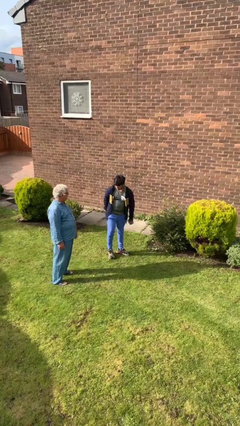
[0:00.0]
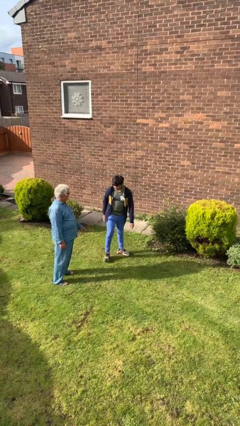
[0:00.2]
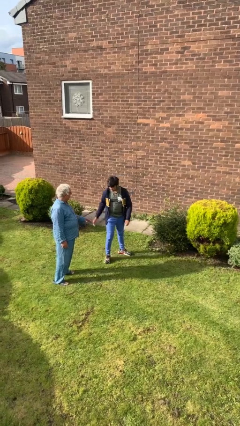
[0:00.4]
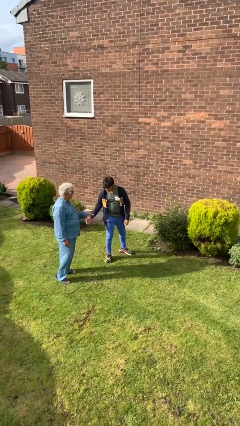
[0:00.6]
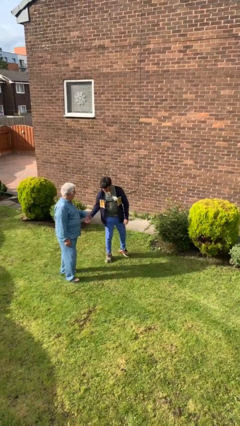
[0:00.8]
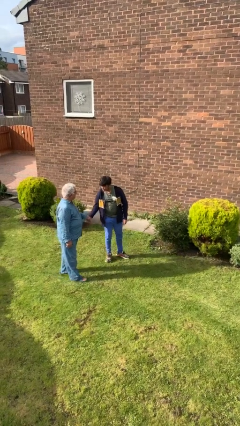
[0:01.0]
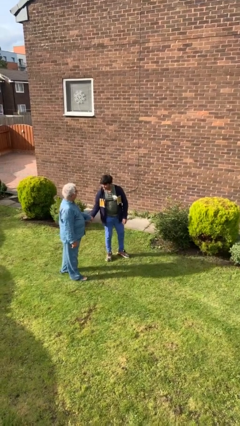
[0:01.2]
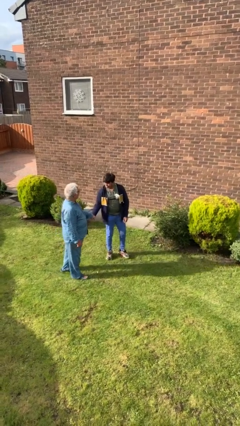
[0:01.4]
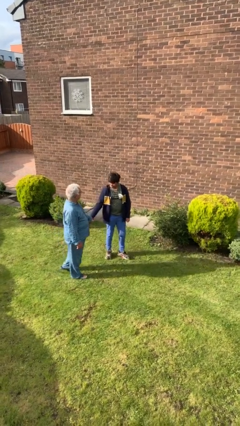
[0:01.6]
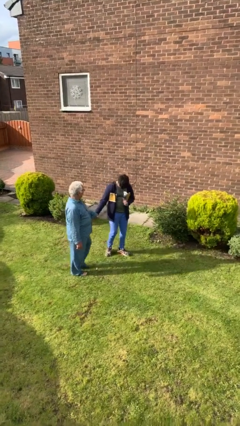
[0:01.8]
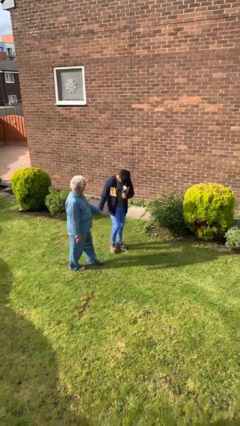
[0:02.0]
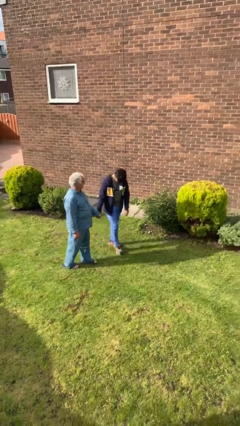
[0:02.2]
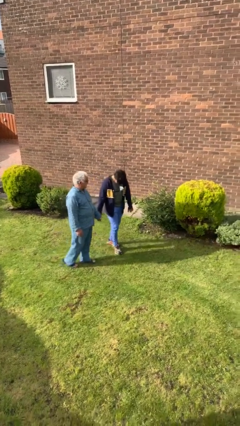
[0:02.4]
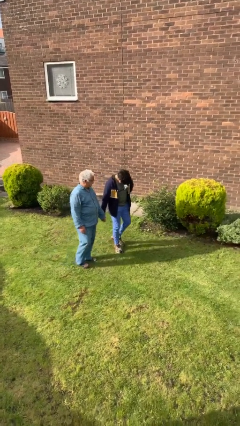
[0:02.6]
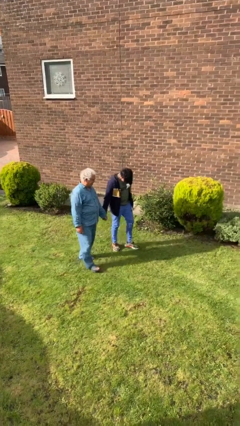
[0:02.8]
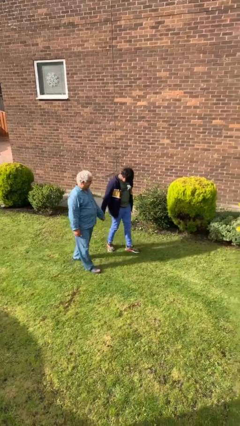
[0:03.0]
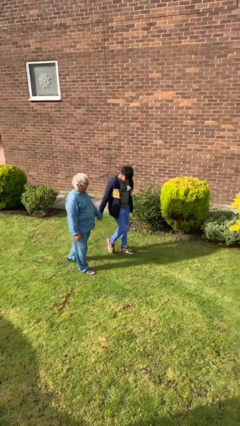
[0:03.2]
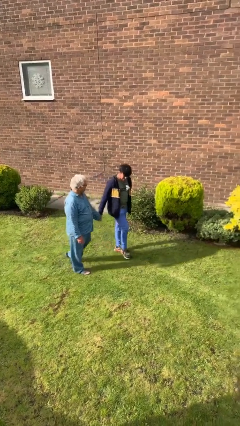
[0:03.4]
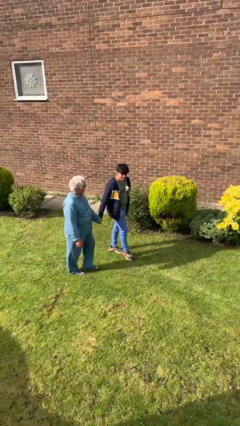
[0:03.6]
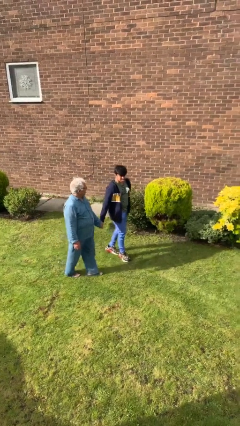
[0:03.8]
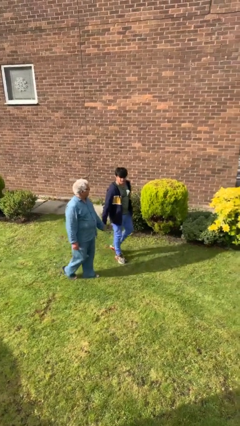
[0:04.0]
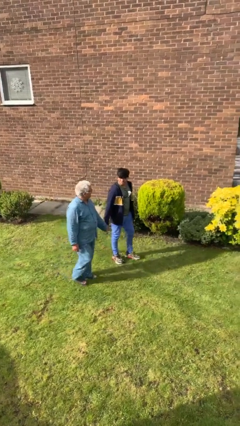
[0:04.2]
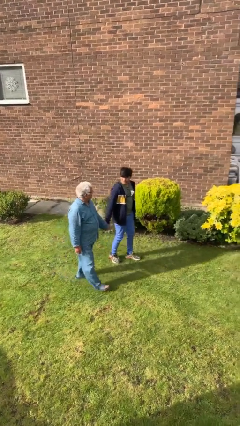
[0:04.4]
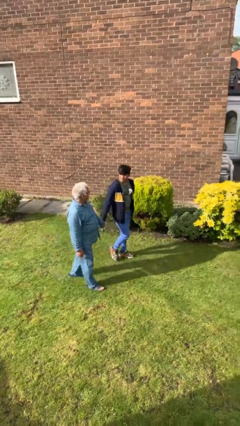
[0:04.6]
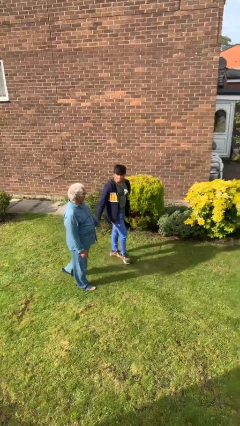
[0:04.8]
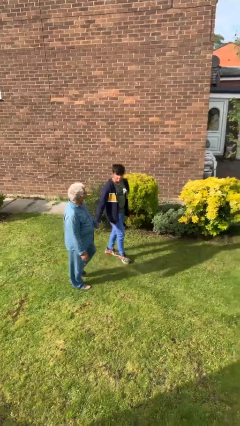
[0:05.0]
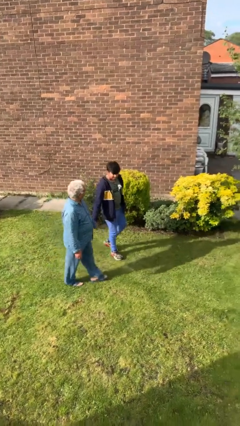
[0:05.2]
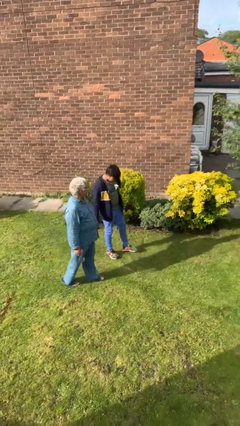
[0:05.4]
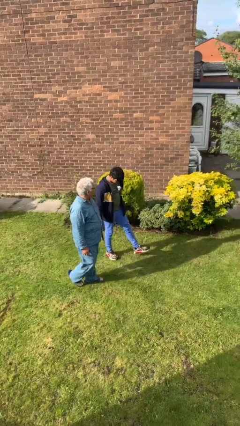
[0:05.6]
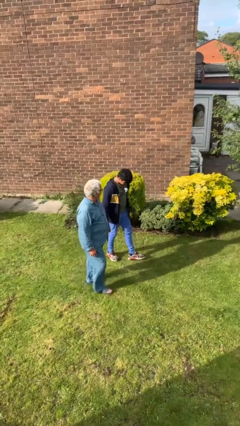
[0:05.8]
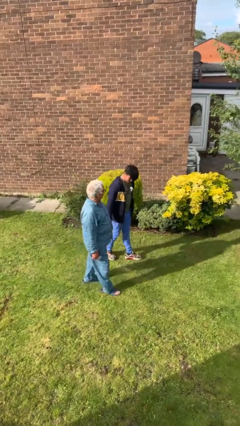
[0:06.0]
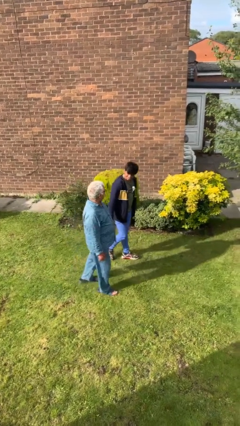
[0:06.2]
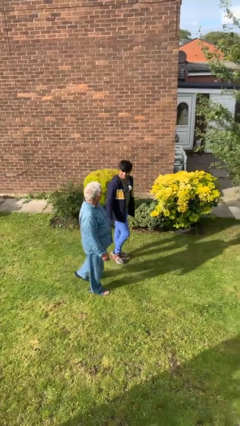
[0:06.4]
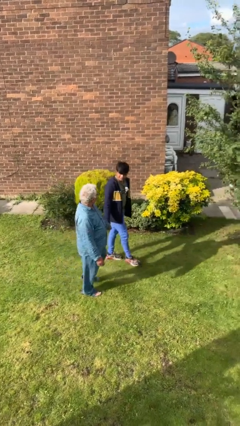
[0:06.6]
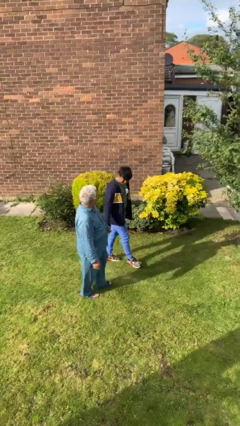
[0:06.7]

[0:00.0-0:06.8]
person holds hand

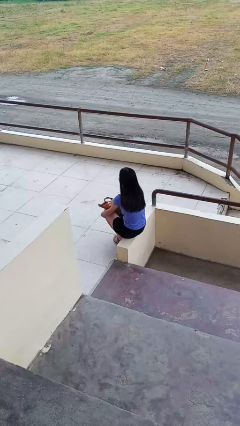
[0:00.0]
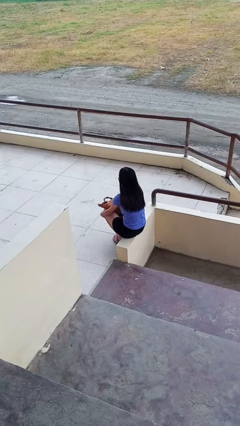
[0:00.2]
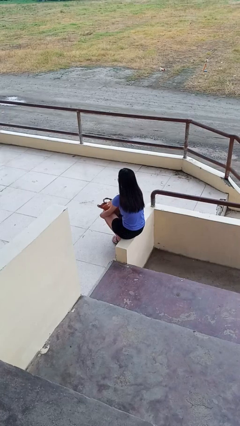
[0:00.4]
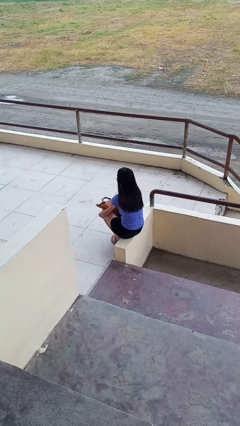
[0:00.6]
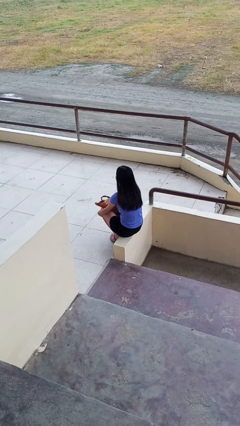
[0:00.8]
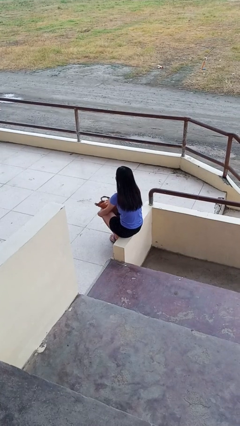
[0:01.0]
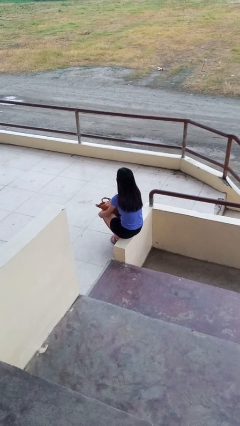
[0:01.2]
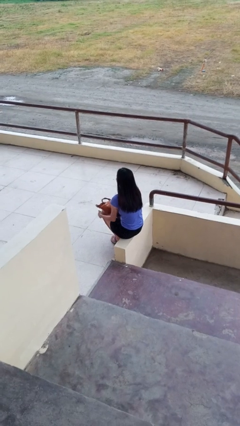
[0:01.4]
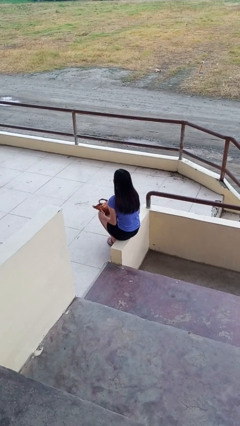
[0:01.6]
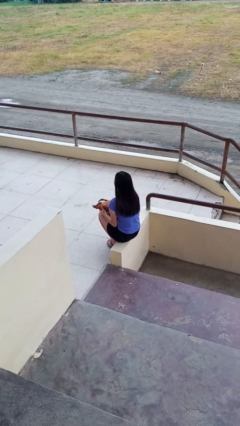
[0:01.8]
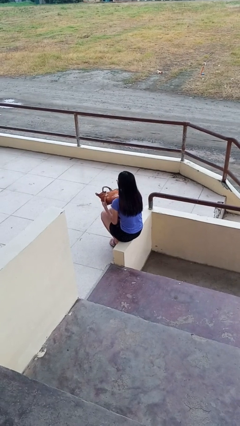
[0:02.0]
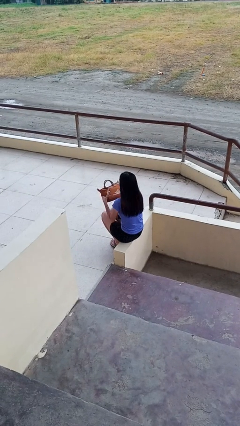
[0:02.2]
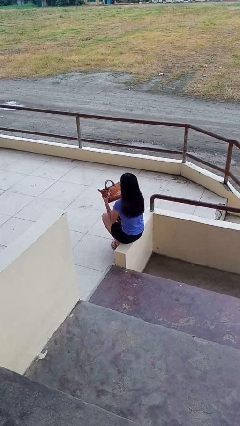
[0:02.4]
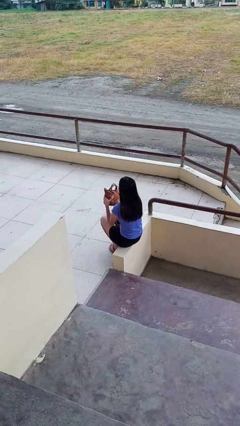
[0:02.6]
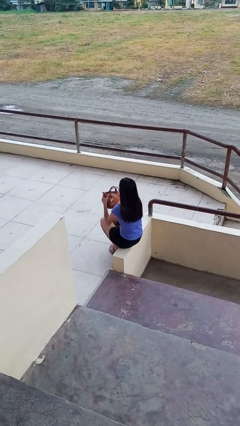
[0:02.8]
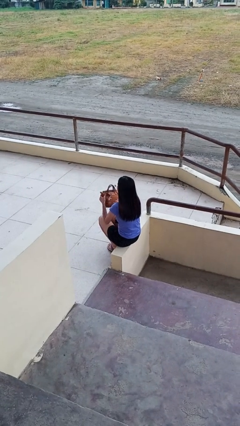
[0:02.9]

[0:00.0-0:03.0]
person taps object with finger

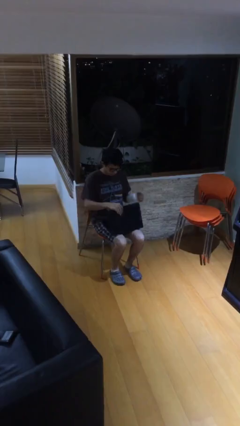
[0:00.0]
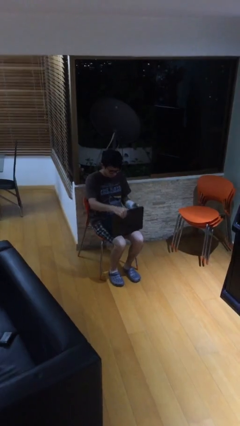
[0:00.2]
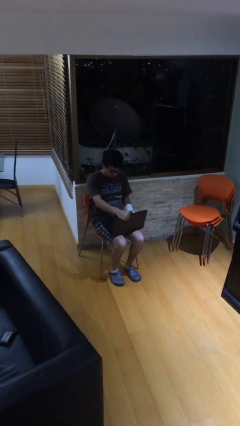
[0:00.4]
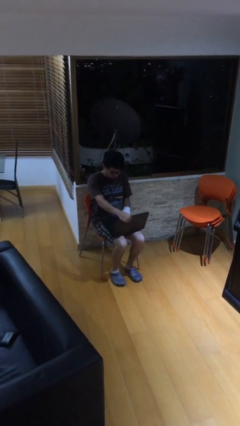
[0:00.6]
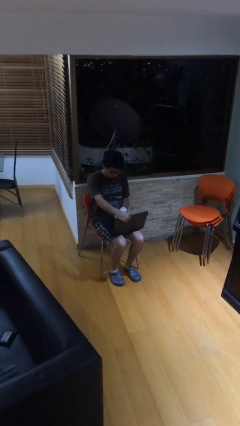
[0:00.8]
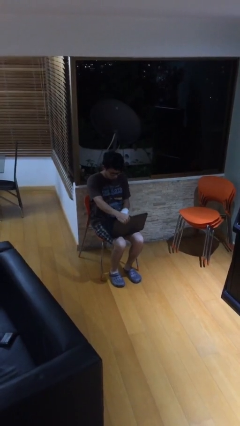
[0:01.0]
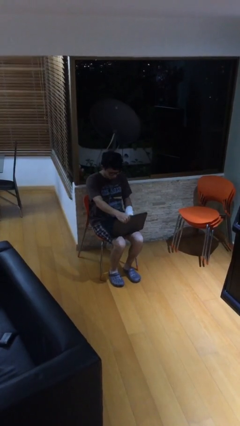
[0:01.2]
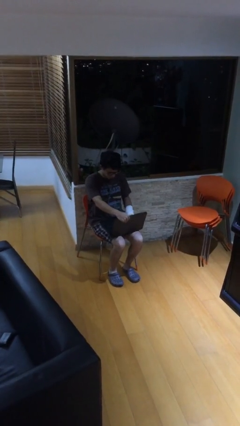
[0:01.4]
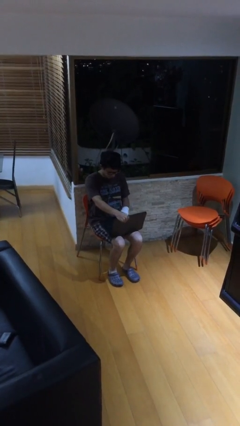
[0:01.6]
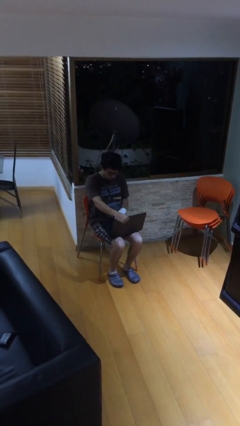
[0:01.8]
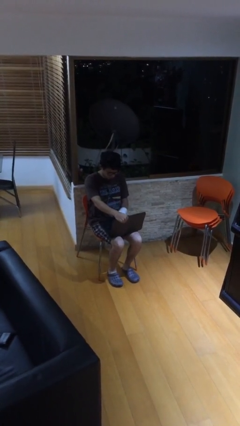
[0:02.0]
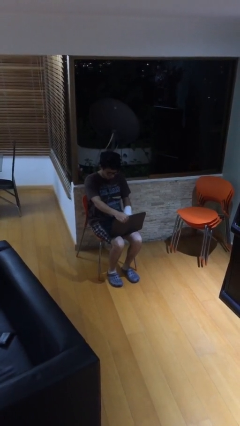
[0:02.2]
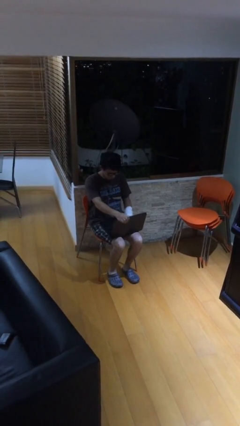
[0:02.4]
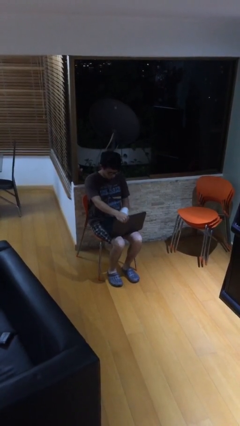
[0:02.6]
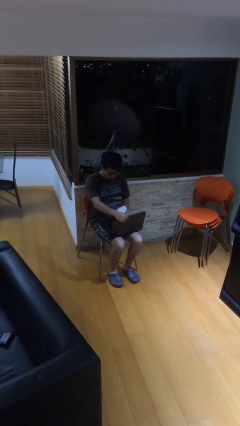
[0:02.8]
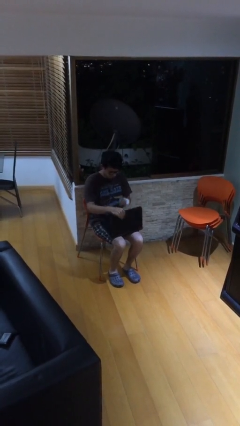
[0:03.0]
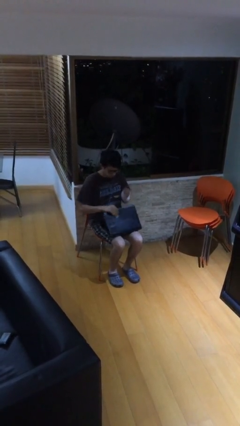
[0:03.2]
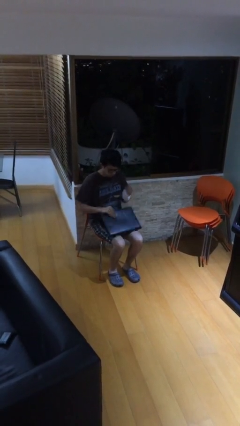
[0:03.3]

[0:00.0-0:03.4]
person interacts with laptop

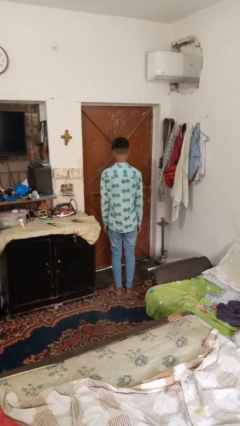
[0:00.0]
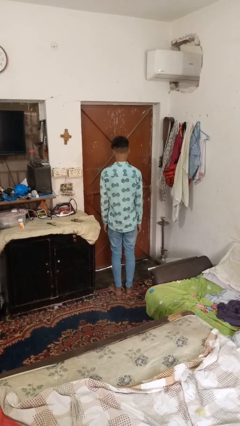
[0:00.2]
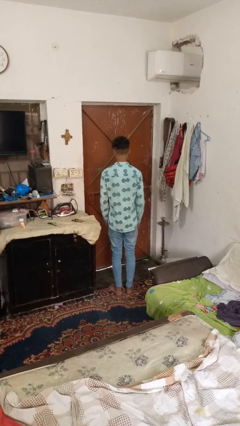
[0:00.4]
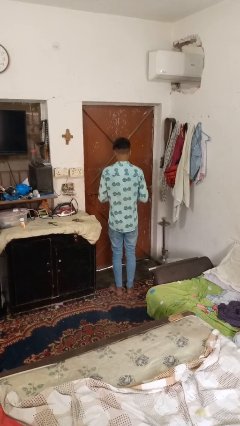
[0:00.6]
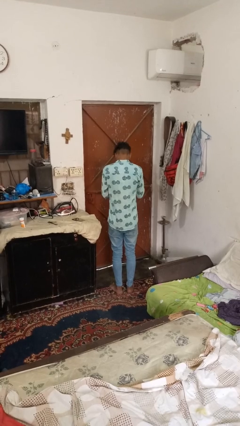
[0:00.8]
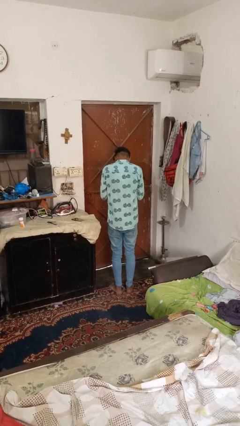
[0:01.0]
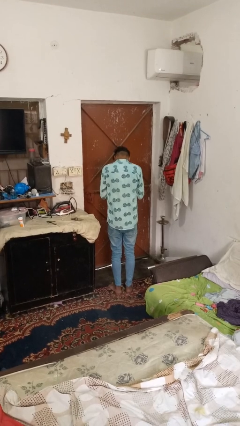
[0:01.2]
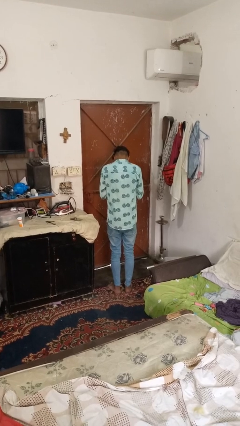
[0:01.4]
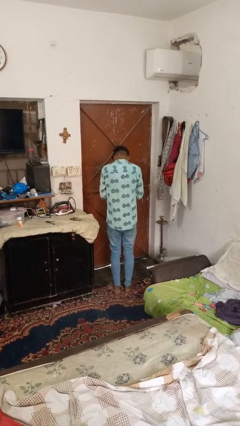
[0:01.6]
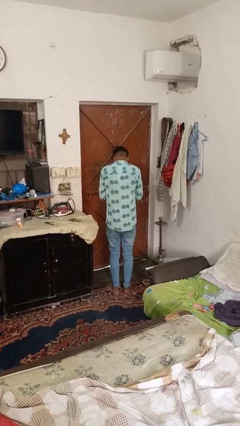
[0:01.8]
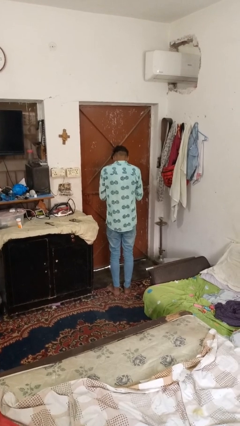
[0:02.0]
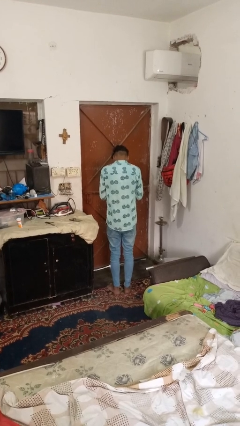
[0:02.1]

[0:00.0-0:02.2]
person sneezes into hand

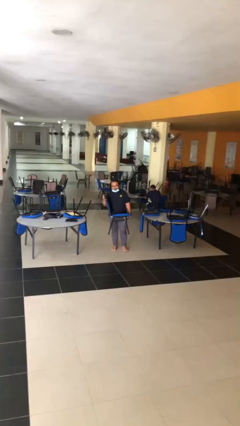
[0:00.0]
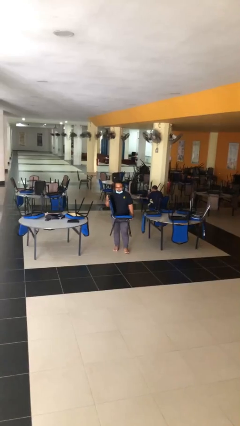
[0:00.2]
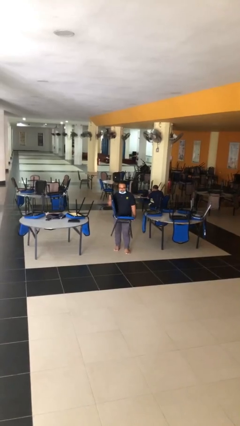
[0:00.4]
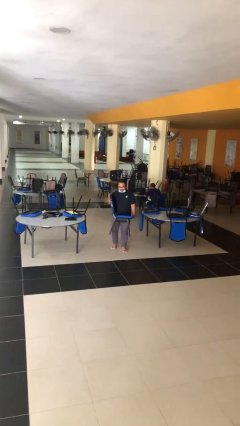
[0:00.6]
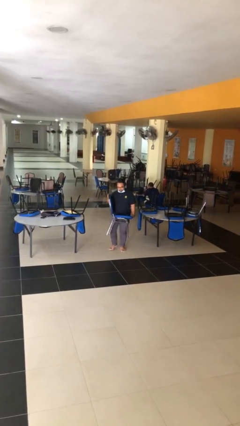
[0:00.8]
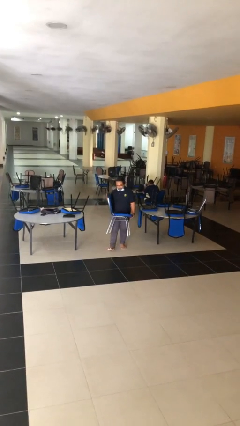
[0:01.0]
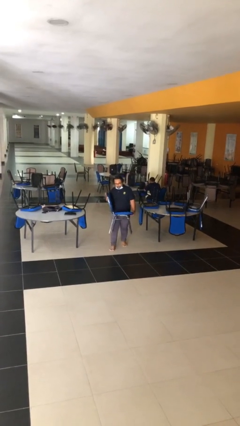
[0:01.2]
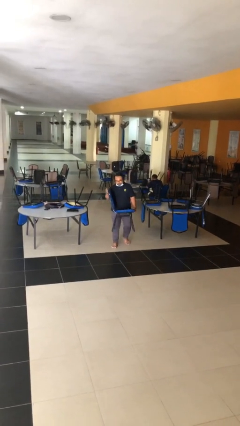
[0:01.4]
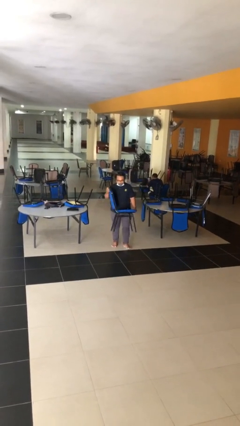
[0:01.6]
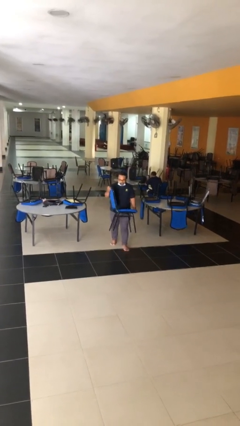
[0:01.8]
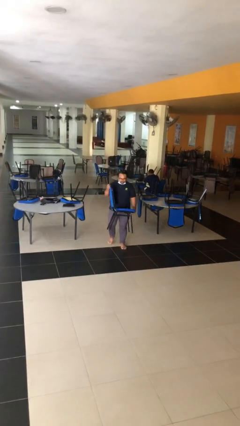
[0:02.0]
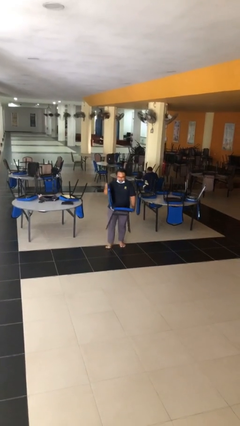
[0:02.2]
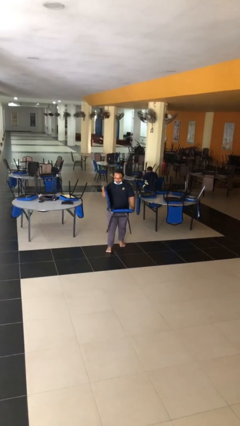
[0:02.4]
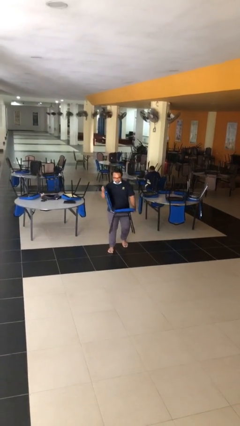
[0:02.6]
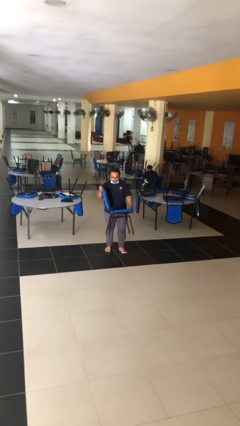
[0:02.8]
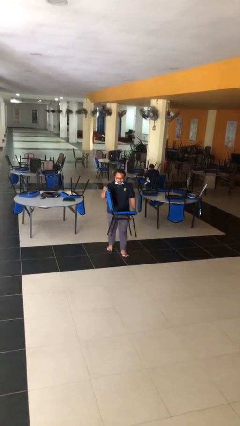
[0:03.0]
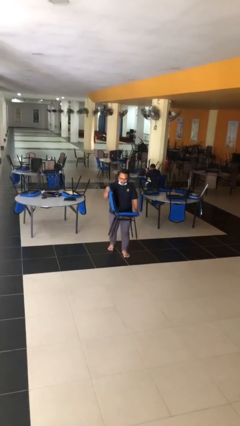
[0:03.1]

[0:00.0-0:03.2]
person carries heavy object
